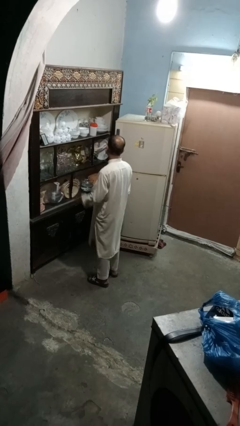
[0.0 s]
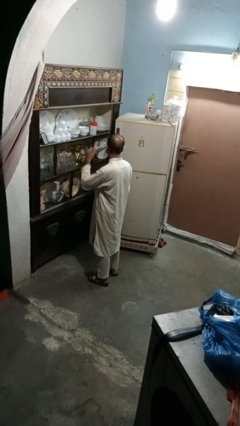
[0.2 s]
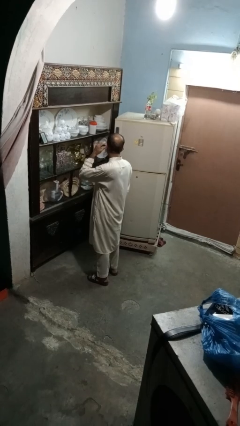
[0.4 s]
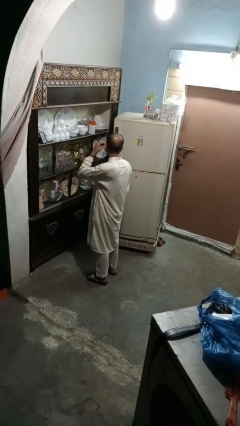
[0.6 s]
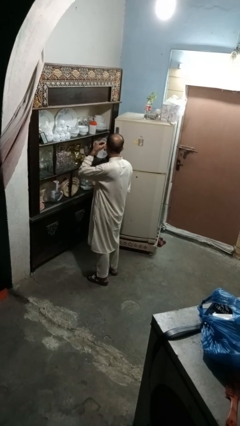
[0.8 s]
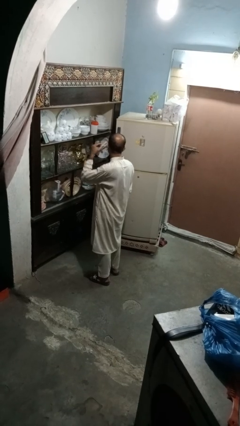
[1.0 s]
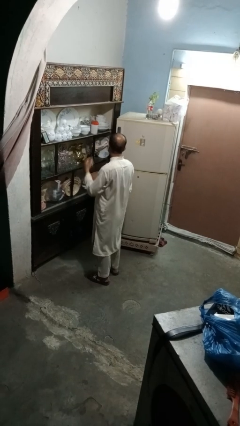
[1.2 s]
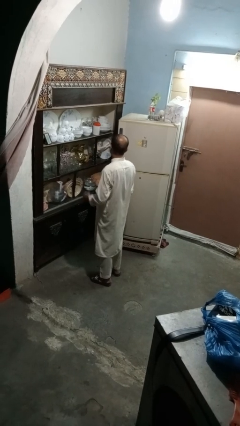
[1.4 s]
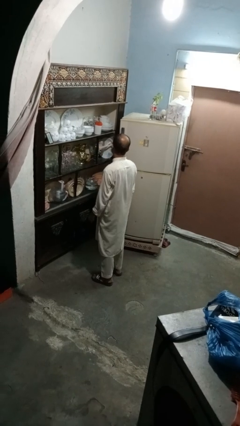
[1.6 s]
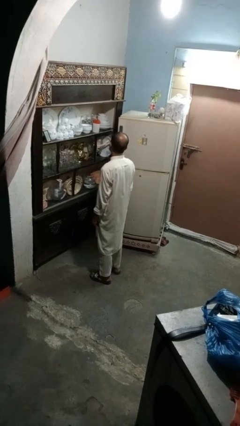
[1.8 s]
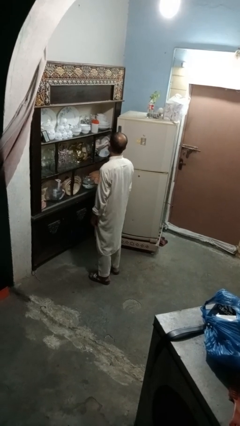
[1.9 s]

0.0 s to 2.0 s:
person takes off earrings

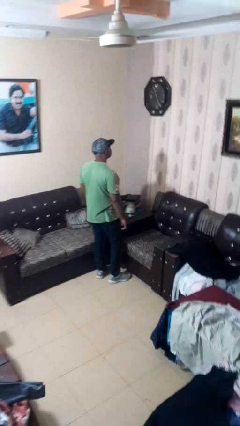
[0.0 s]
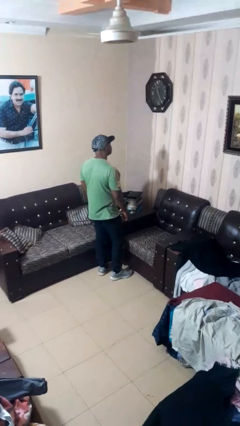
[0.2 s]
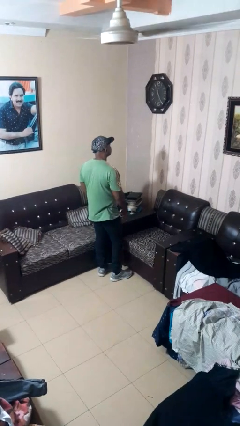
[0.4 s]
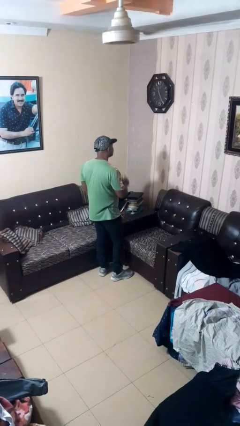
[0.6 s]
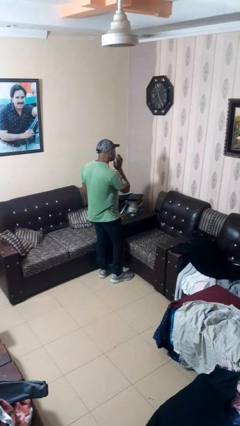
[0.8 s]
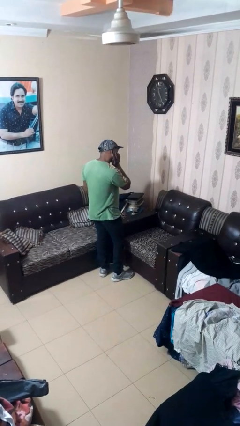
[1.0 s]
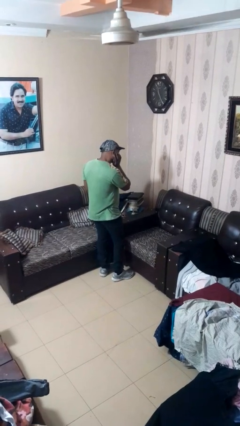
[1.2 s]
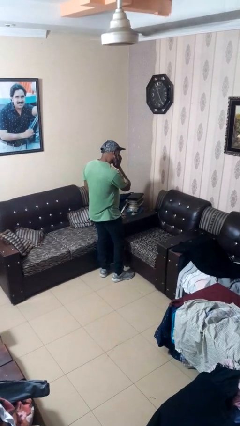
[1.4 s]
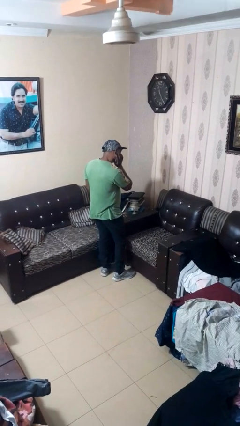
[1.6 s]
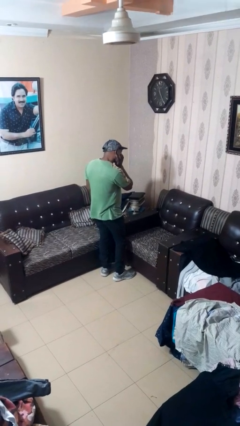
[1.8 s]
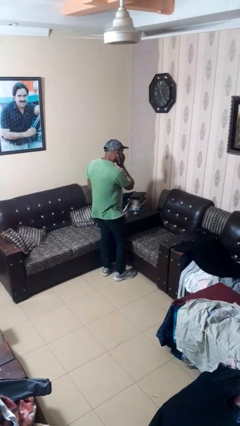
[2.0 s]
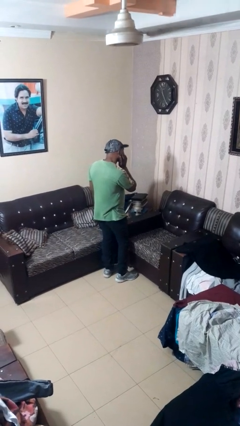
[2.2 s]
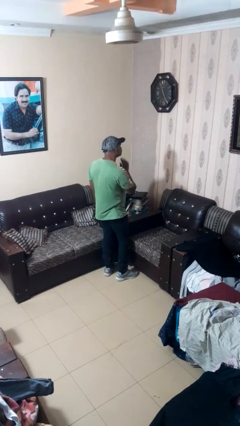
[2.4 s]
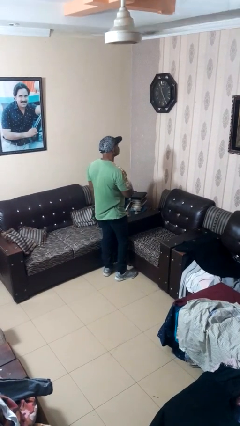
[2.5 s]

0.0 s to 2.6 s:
person strokes chin

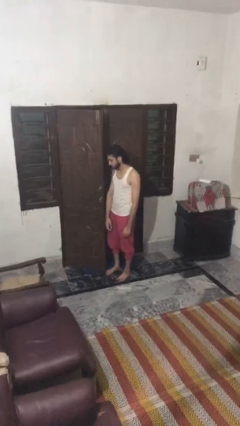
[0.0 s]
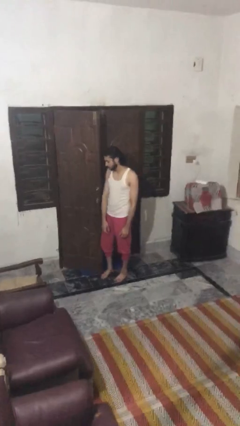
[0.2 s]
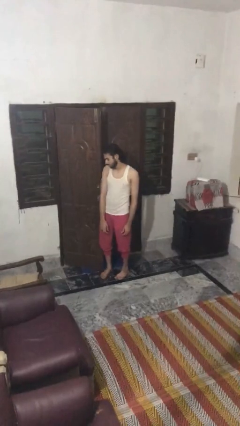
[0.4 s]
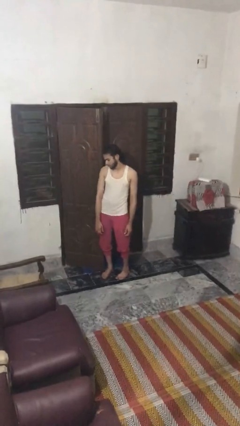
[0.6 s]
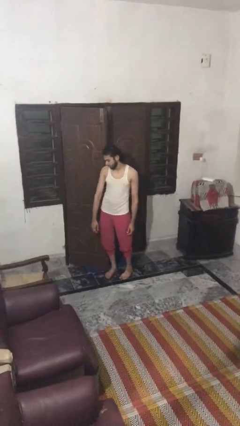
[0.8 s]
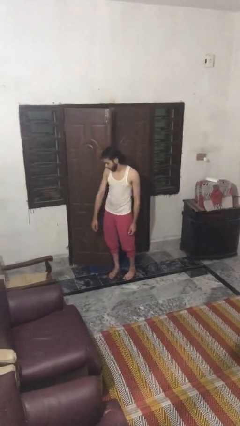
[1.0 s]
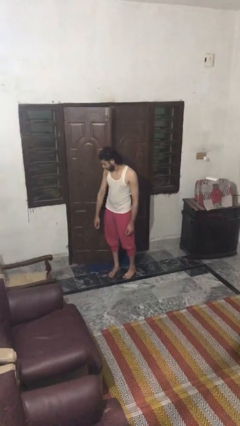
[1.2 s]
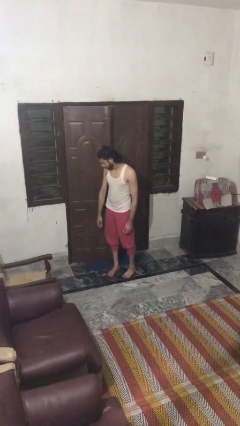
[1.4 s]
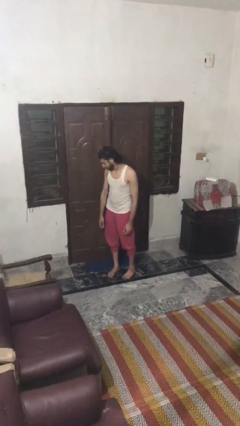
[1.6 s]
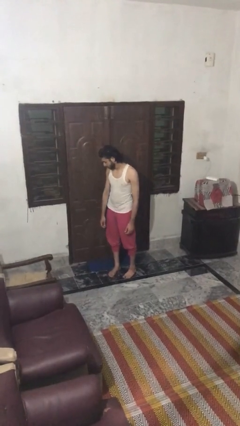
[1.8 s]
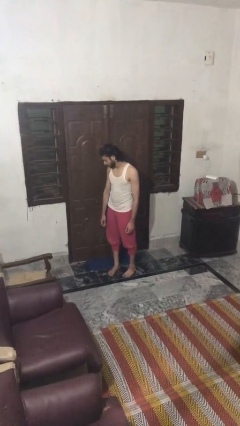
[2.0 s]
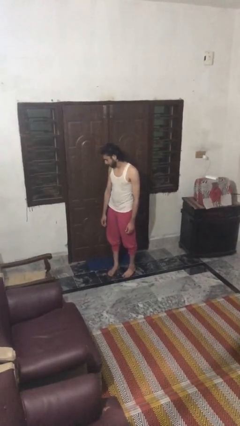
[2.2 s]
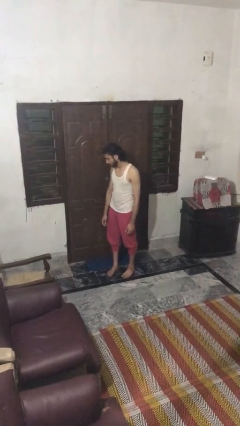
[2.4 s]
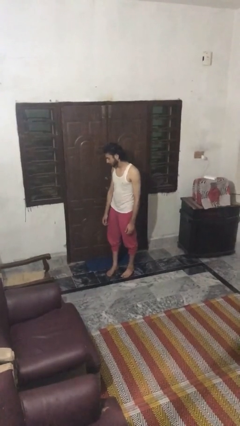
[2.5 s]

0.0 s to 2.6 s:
person closes door with hip

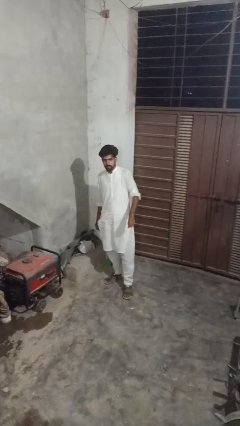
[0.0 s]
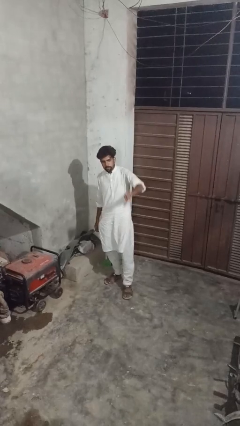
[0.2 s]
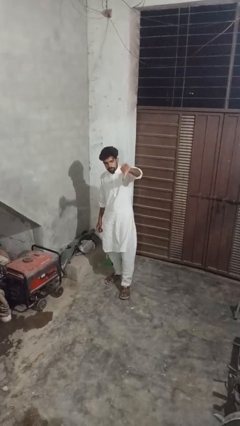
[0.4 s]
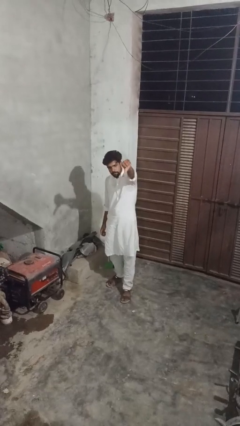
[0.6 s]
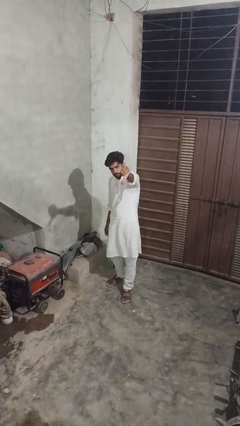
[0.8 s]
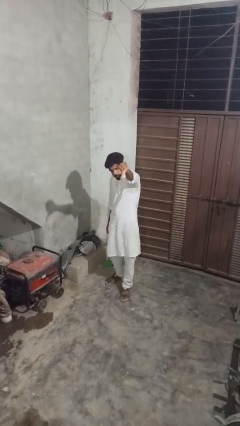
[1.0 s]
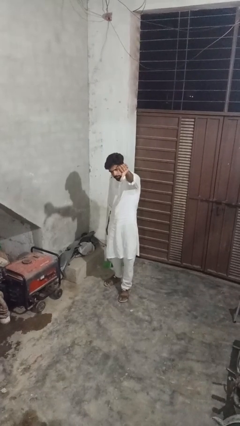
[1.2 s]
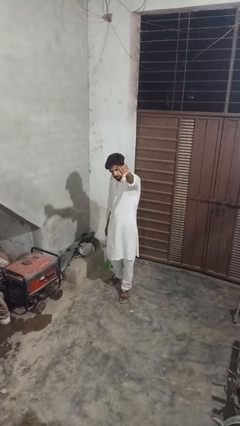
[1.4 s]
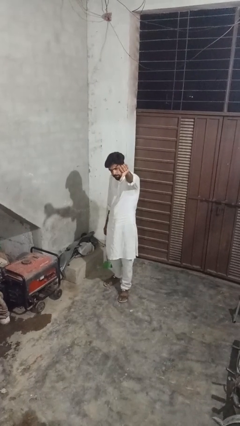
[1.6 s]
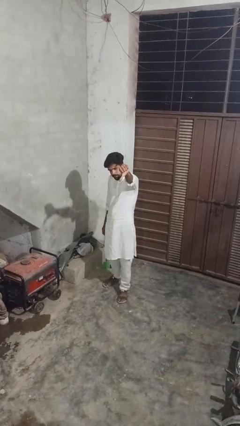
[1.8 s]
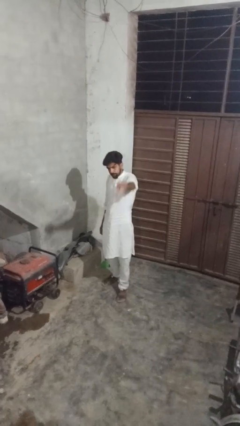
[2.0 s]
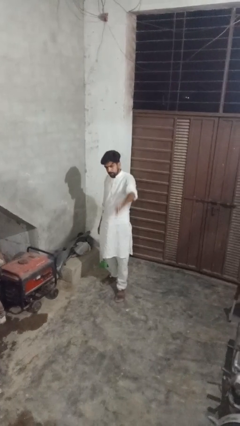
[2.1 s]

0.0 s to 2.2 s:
person gestures thumbs down

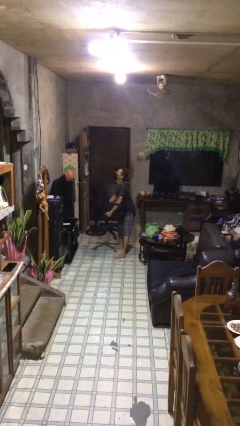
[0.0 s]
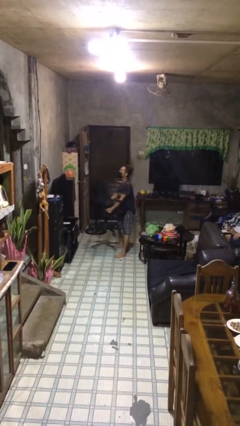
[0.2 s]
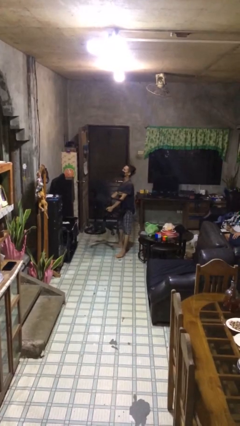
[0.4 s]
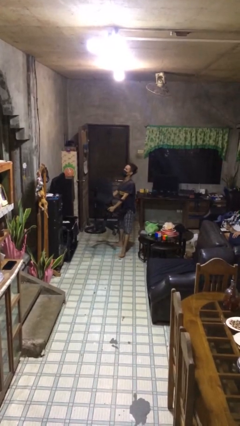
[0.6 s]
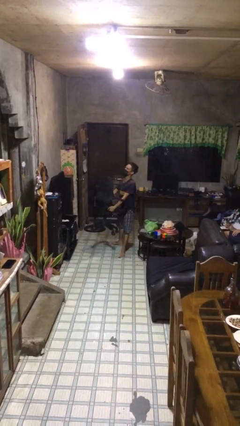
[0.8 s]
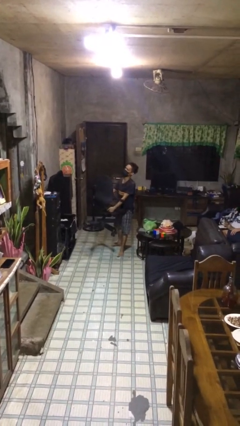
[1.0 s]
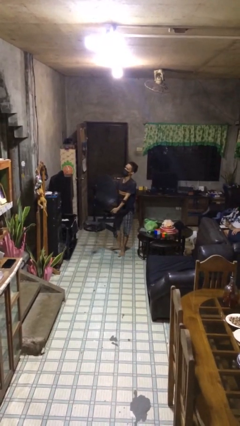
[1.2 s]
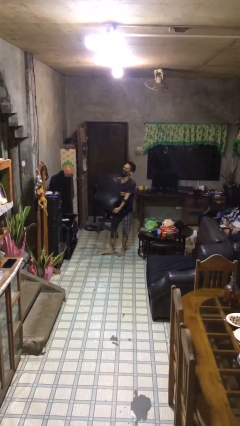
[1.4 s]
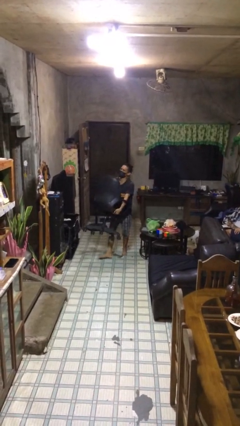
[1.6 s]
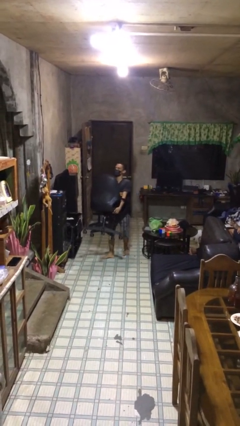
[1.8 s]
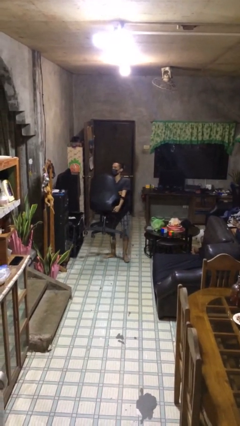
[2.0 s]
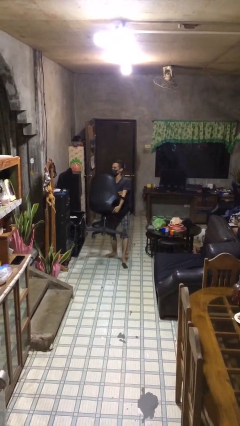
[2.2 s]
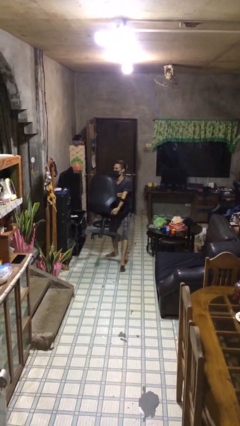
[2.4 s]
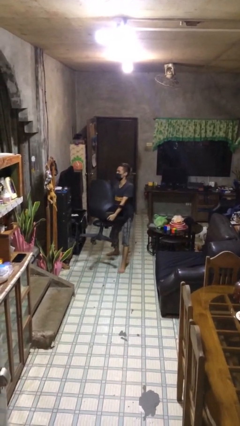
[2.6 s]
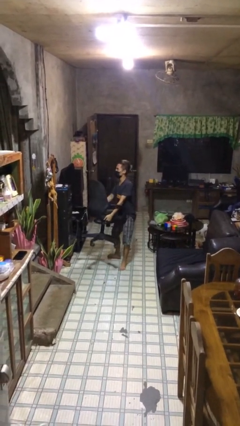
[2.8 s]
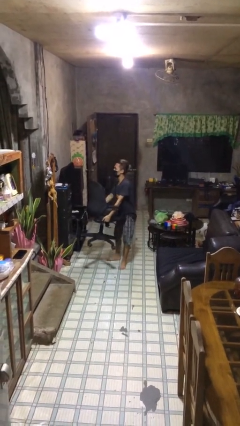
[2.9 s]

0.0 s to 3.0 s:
person carries heavy object

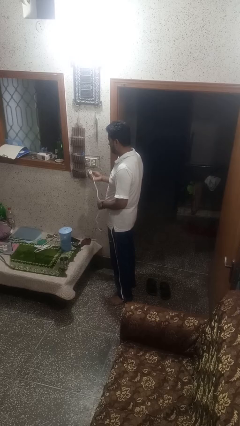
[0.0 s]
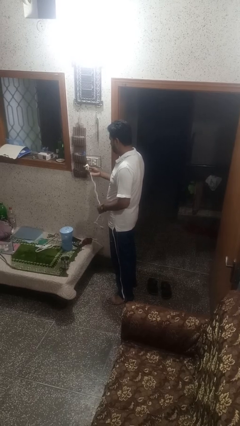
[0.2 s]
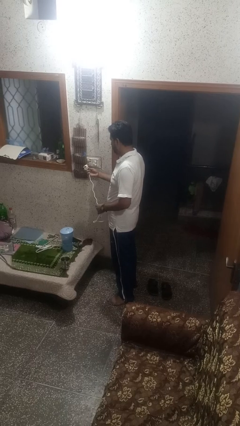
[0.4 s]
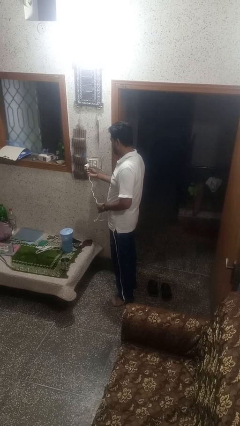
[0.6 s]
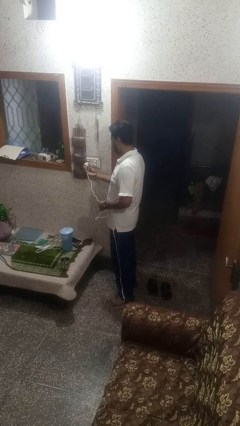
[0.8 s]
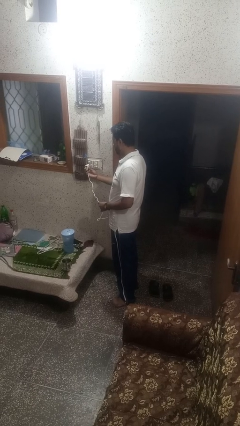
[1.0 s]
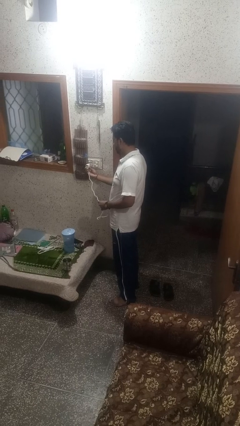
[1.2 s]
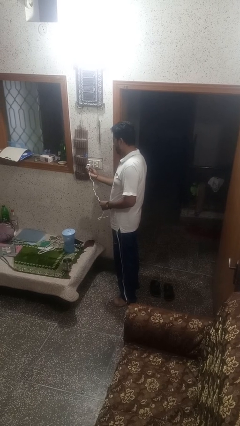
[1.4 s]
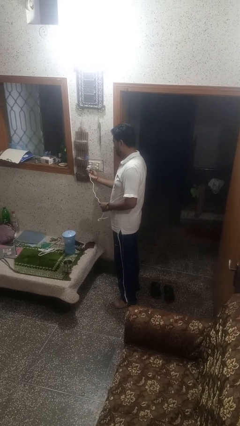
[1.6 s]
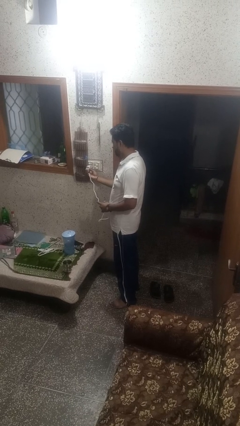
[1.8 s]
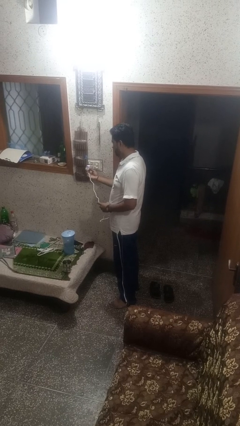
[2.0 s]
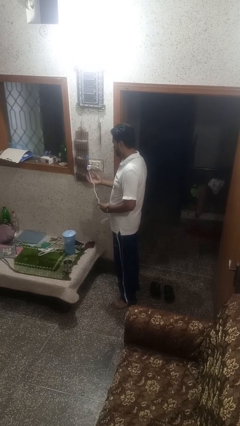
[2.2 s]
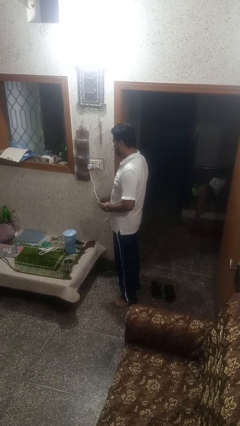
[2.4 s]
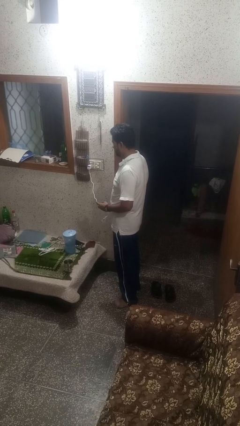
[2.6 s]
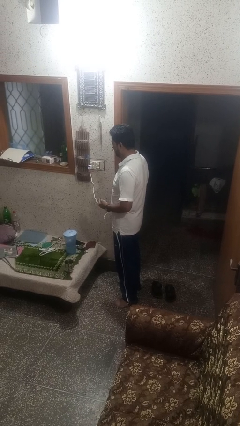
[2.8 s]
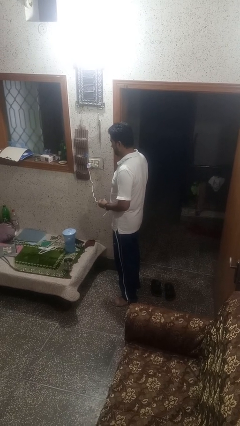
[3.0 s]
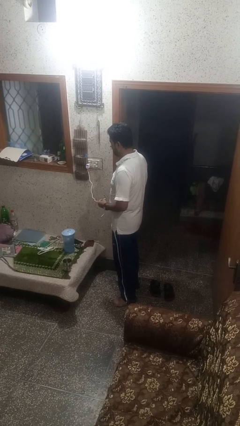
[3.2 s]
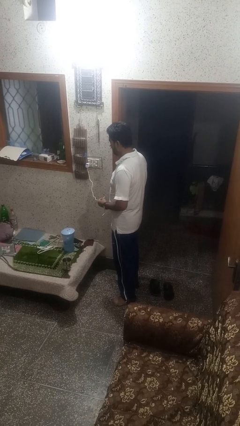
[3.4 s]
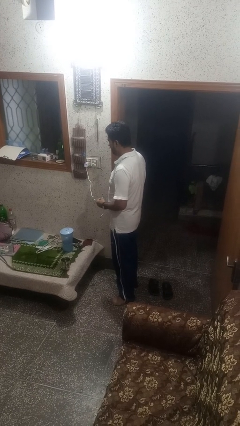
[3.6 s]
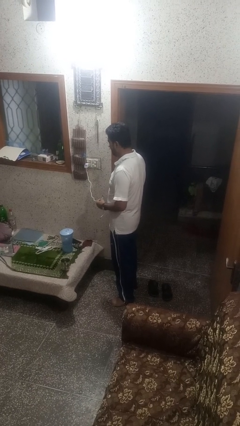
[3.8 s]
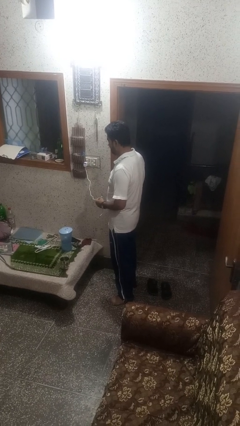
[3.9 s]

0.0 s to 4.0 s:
person plugs into electrical socket

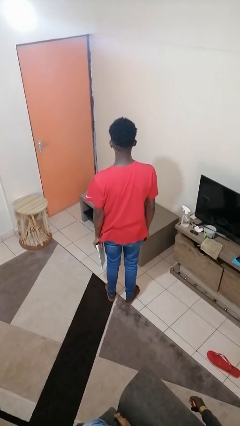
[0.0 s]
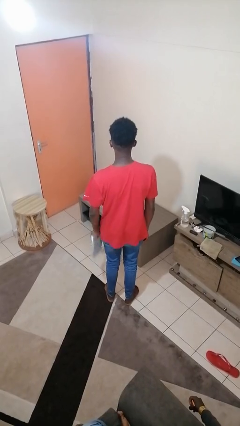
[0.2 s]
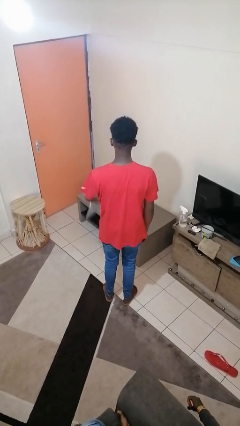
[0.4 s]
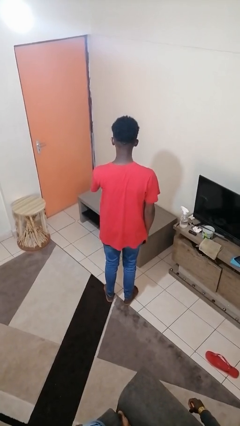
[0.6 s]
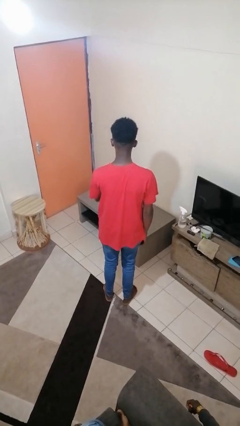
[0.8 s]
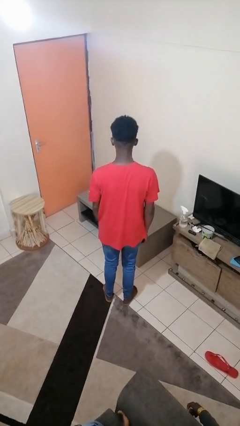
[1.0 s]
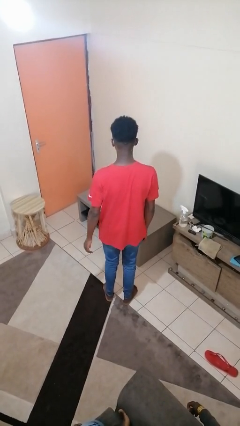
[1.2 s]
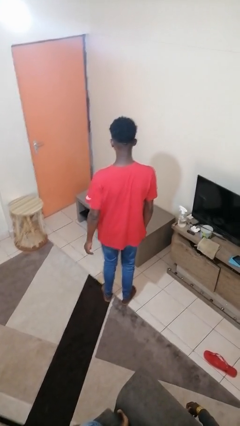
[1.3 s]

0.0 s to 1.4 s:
person throws object on table
